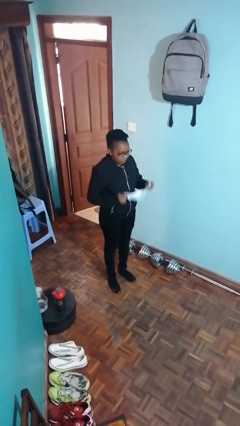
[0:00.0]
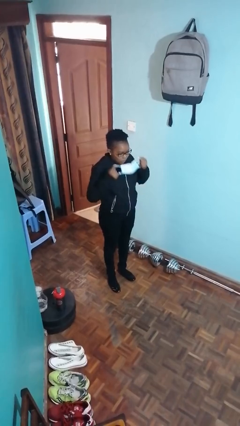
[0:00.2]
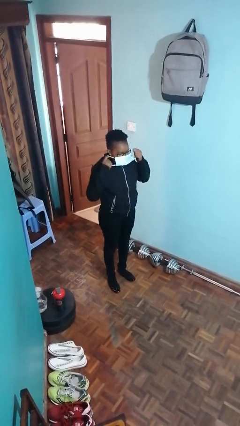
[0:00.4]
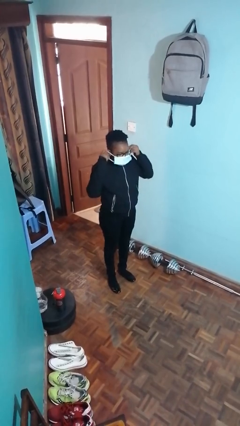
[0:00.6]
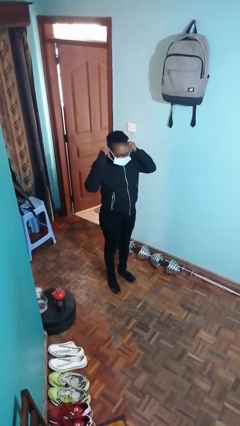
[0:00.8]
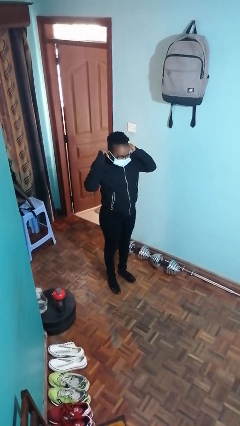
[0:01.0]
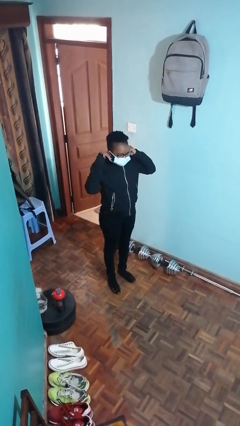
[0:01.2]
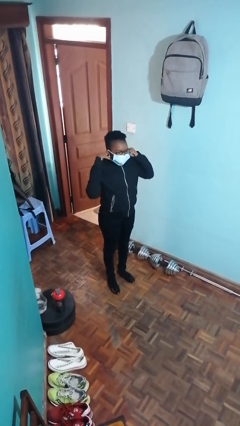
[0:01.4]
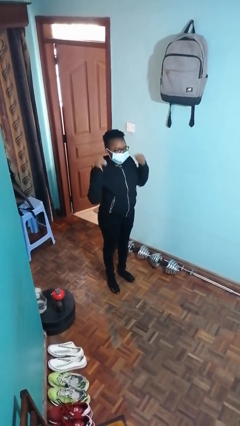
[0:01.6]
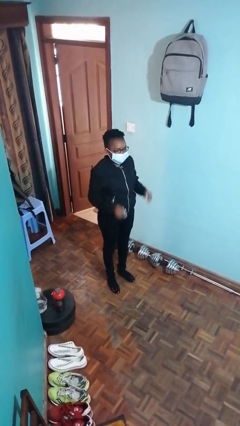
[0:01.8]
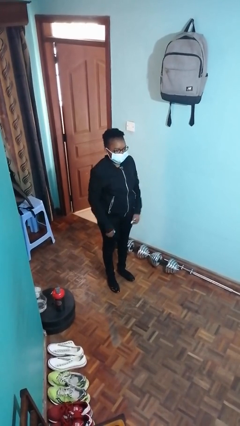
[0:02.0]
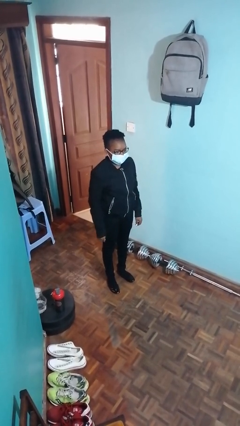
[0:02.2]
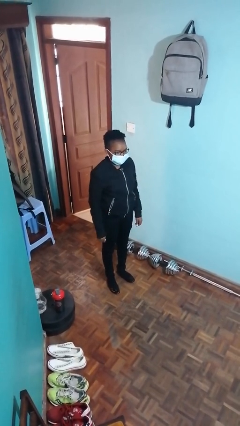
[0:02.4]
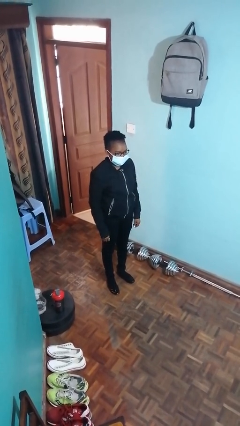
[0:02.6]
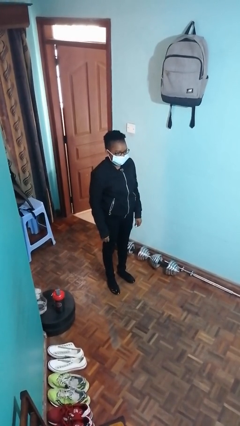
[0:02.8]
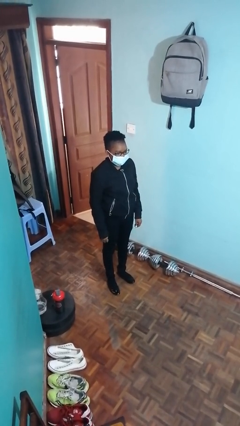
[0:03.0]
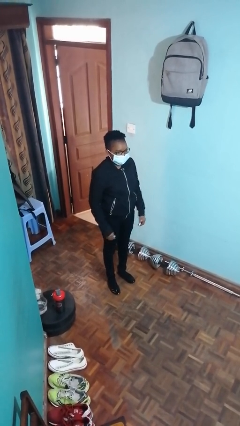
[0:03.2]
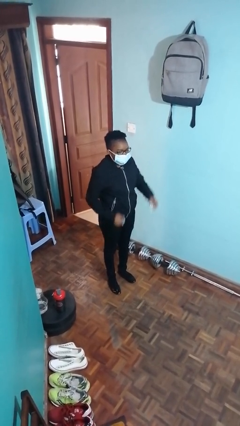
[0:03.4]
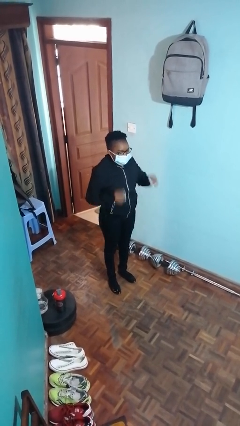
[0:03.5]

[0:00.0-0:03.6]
person puts on facemask

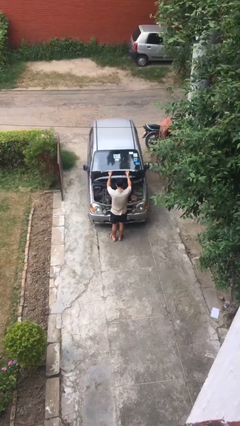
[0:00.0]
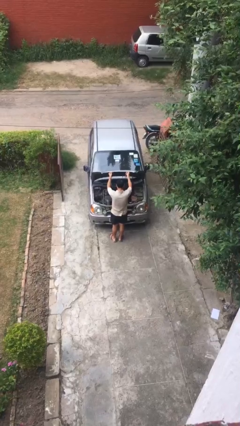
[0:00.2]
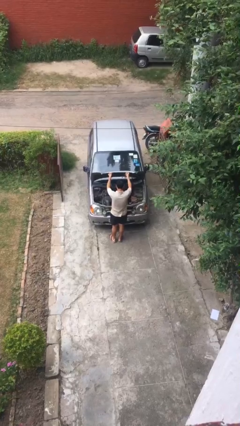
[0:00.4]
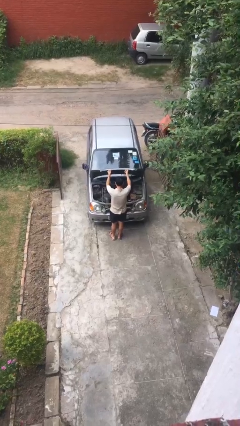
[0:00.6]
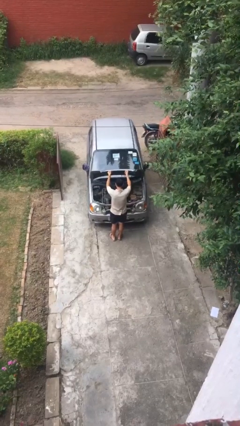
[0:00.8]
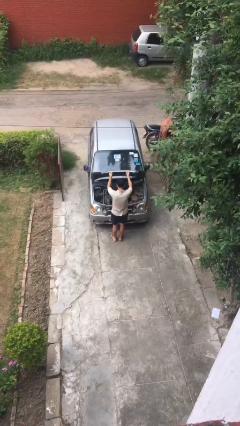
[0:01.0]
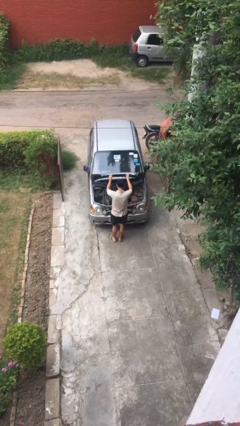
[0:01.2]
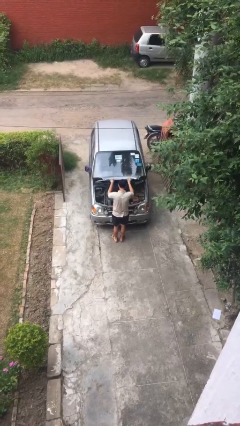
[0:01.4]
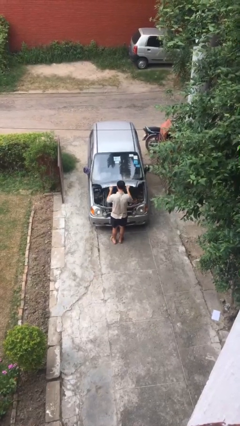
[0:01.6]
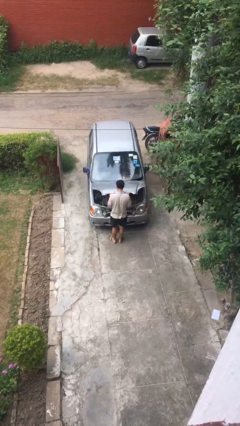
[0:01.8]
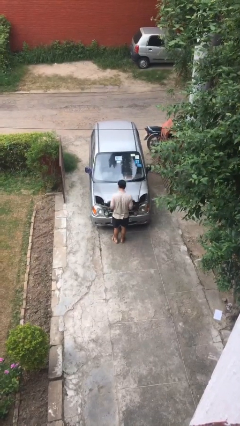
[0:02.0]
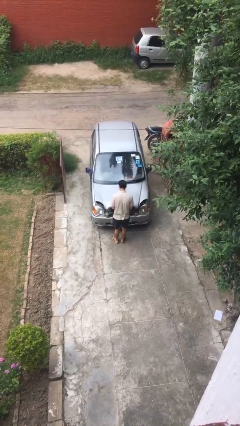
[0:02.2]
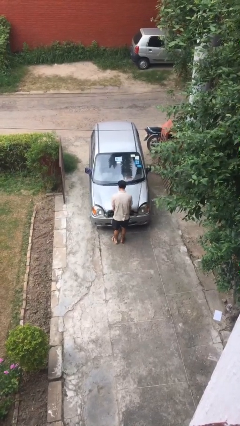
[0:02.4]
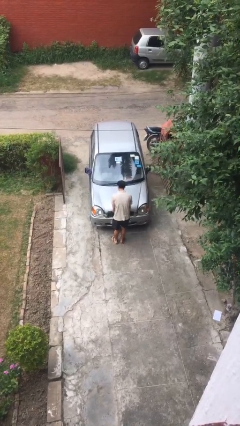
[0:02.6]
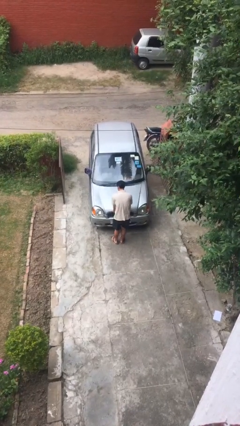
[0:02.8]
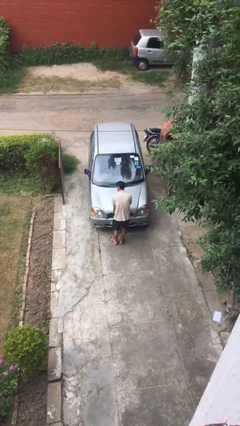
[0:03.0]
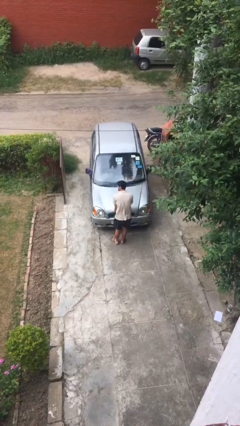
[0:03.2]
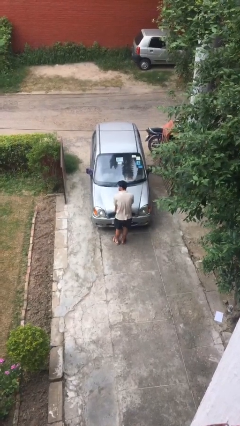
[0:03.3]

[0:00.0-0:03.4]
person closes car hood

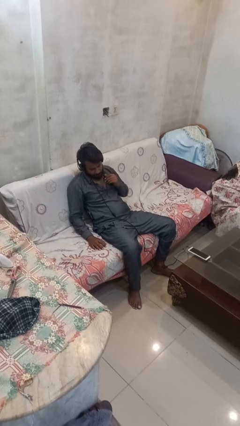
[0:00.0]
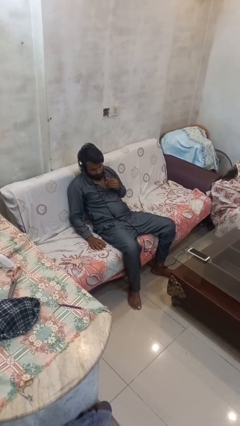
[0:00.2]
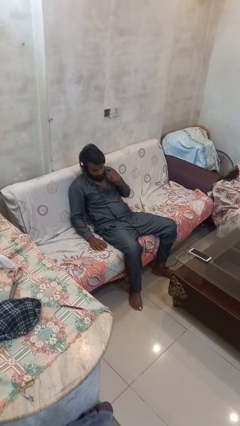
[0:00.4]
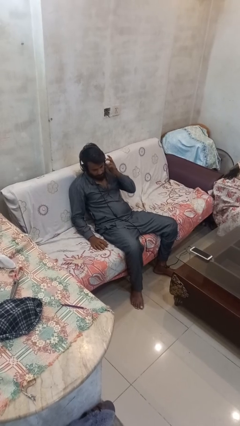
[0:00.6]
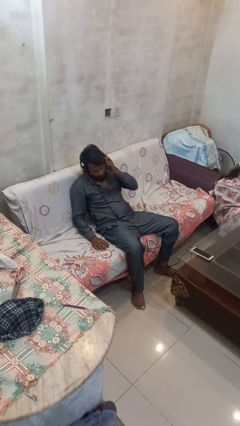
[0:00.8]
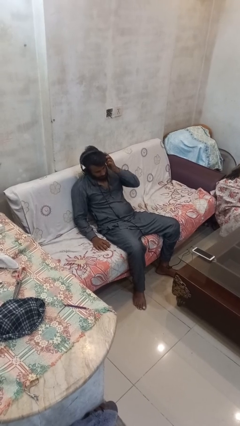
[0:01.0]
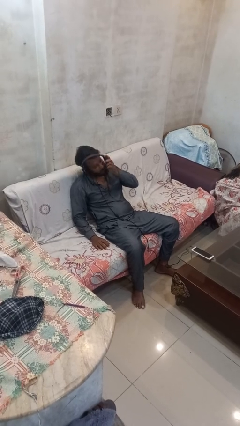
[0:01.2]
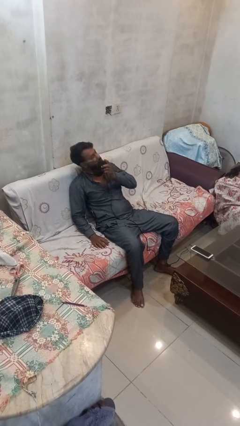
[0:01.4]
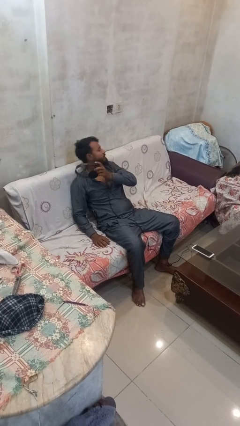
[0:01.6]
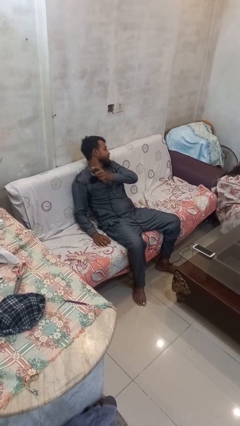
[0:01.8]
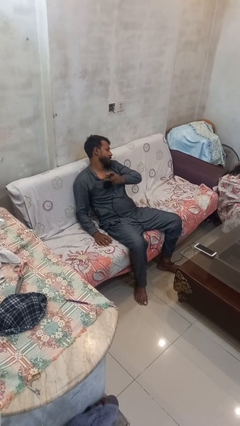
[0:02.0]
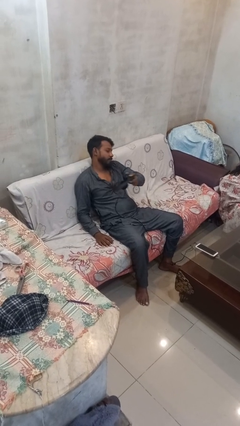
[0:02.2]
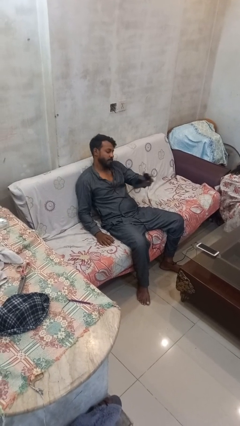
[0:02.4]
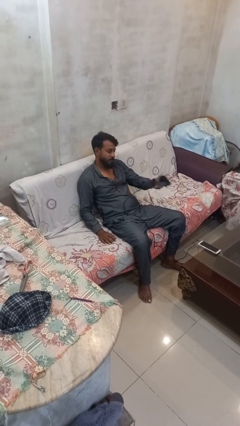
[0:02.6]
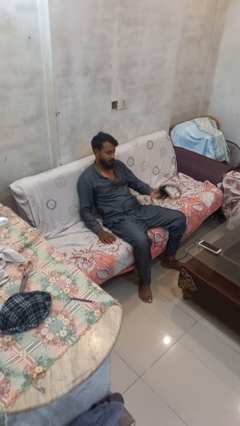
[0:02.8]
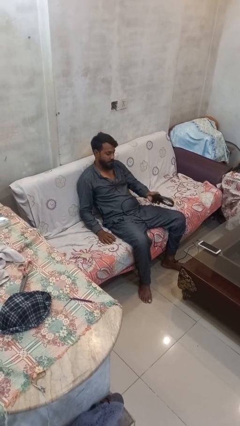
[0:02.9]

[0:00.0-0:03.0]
person takes off headphones

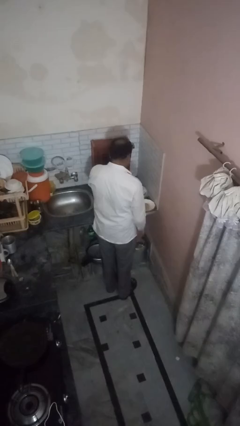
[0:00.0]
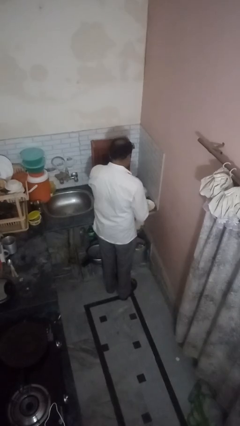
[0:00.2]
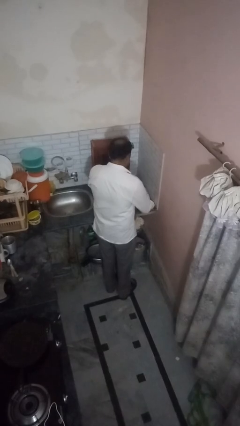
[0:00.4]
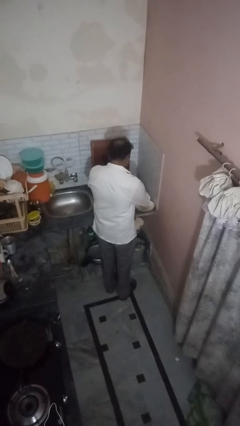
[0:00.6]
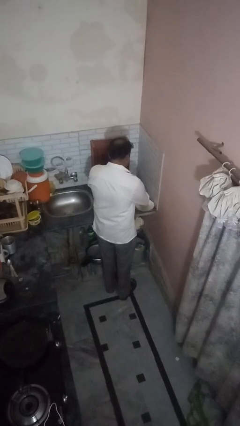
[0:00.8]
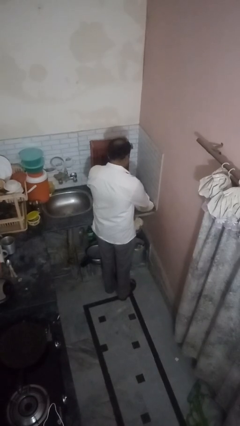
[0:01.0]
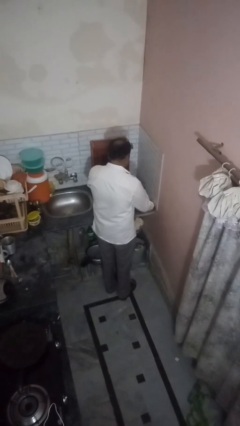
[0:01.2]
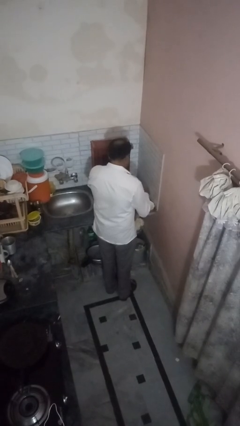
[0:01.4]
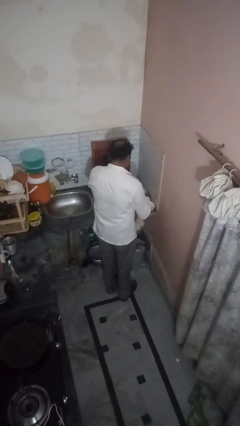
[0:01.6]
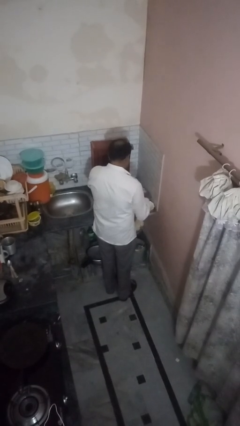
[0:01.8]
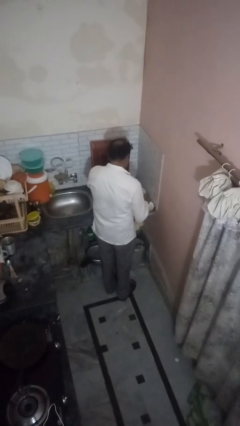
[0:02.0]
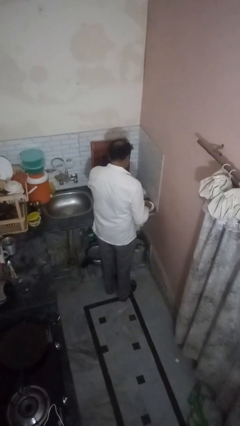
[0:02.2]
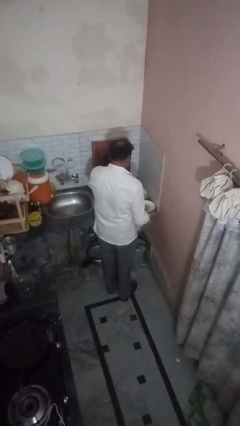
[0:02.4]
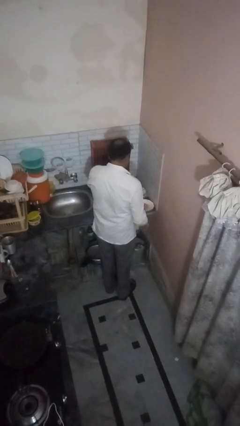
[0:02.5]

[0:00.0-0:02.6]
person pours into bowl

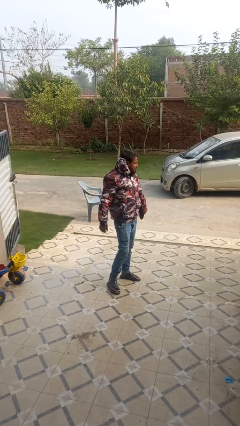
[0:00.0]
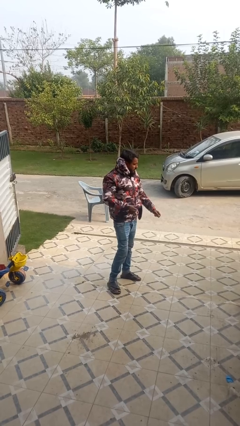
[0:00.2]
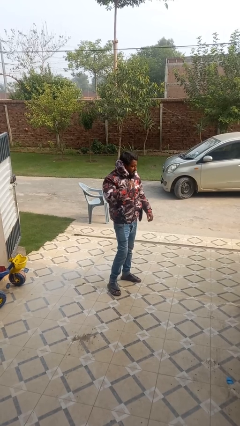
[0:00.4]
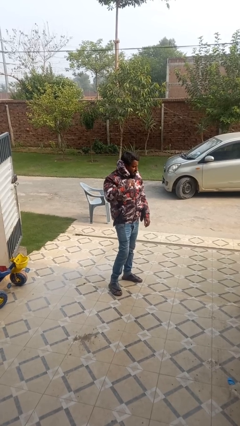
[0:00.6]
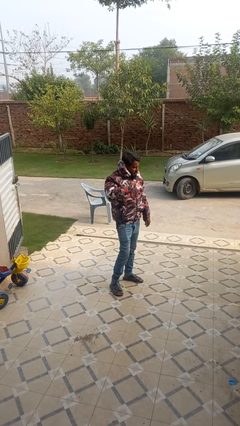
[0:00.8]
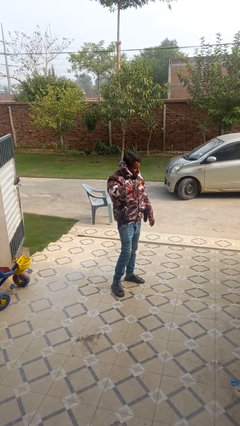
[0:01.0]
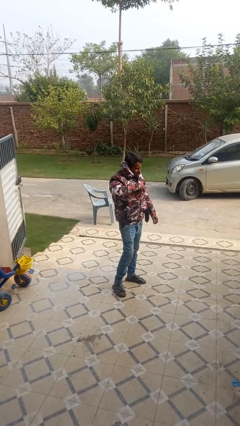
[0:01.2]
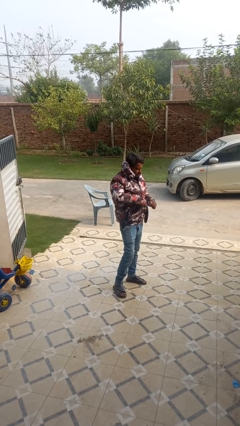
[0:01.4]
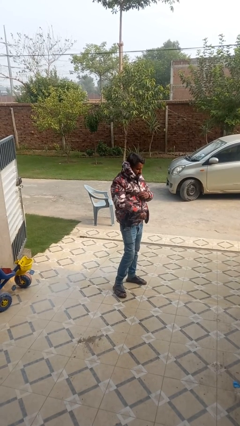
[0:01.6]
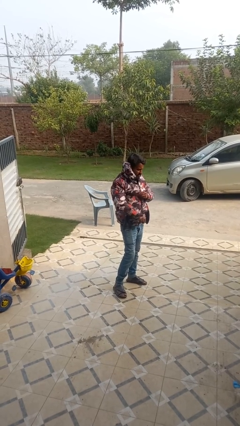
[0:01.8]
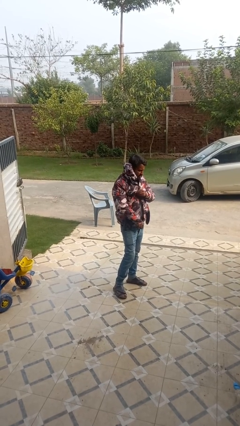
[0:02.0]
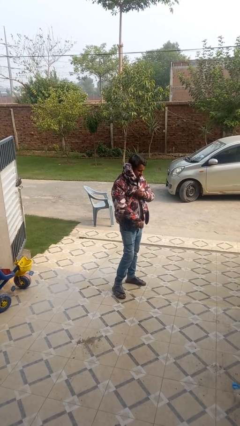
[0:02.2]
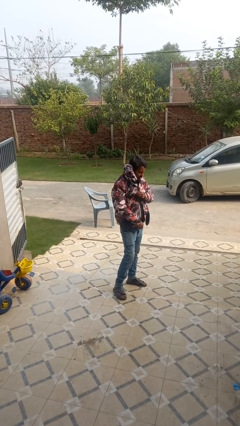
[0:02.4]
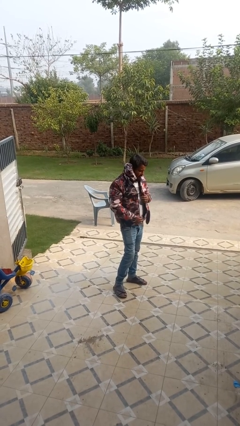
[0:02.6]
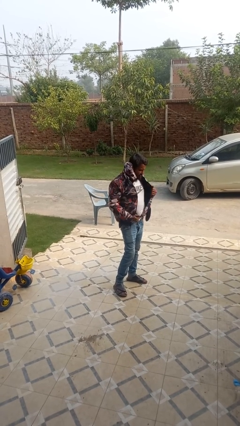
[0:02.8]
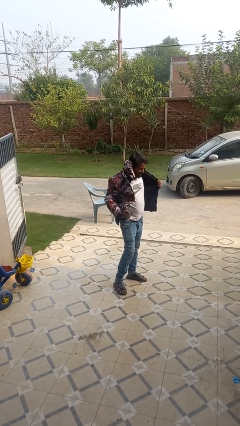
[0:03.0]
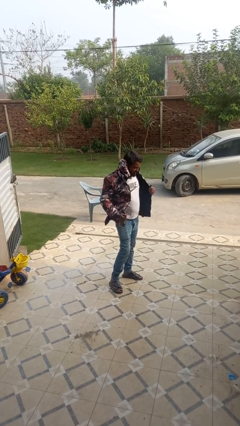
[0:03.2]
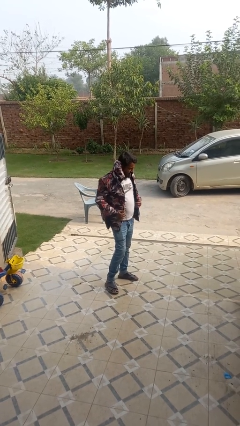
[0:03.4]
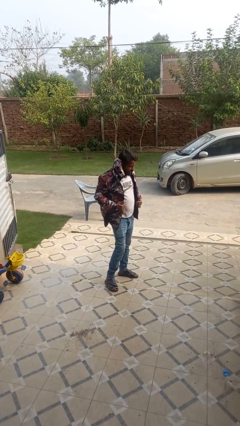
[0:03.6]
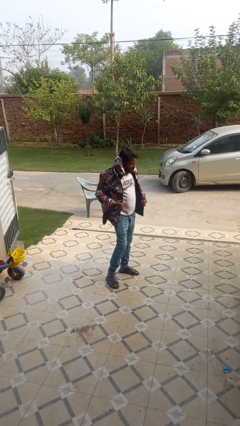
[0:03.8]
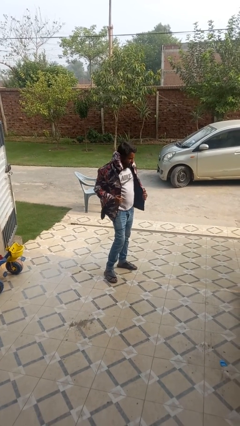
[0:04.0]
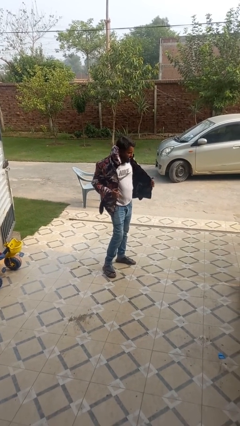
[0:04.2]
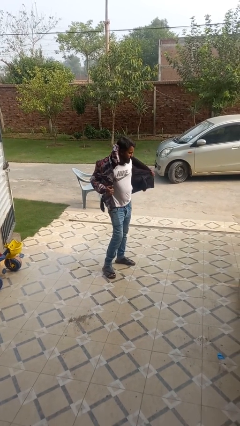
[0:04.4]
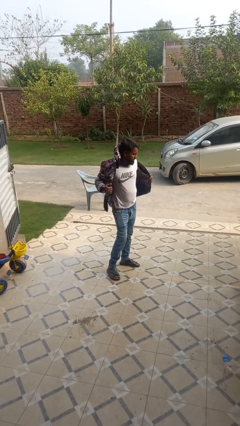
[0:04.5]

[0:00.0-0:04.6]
person unzips jacket

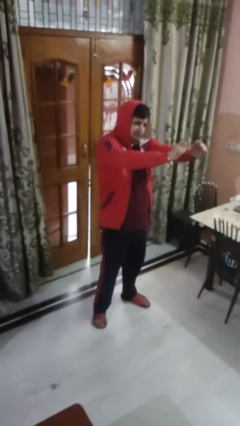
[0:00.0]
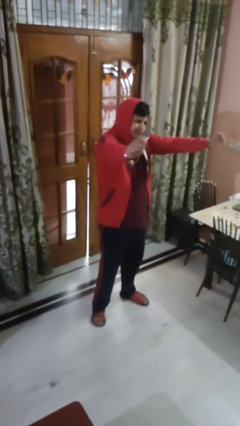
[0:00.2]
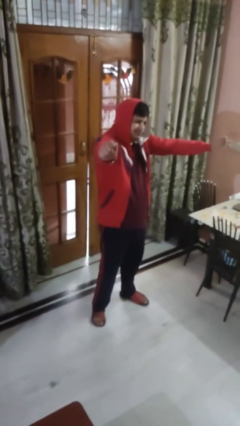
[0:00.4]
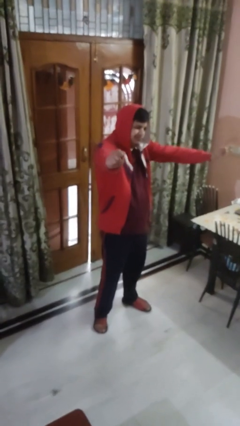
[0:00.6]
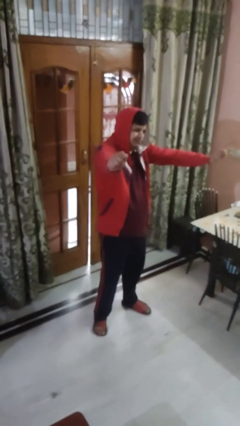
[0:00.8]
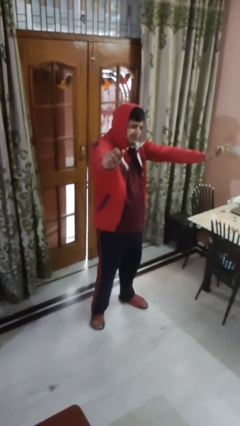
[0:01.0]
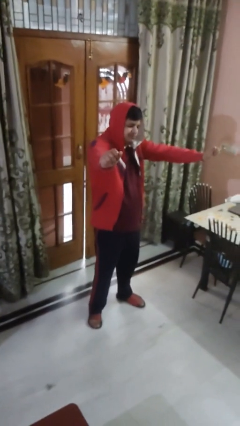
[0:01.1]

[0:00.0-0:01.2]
person gestures zoom in
